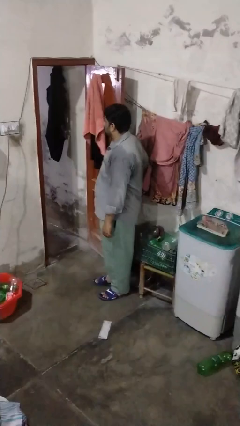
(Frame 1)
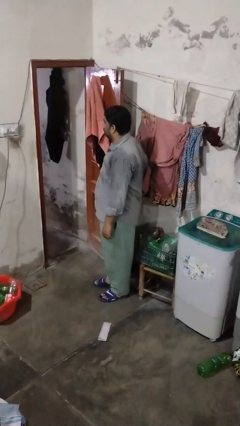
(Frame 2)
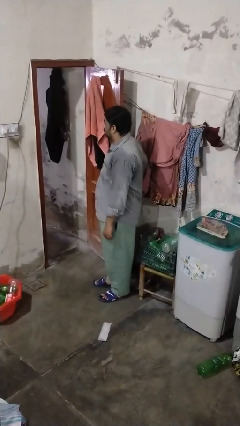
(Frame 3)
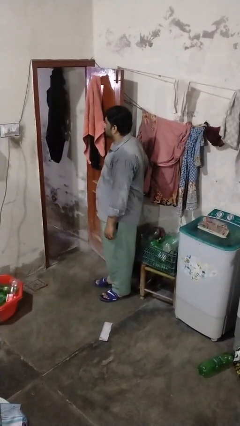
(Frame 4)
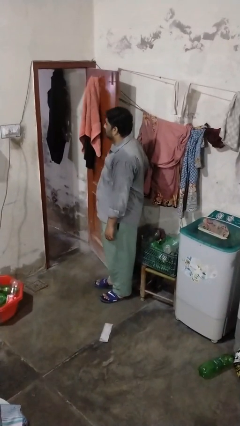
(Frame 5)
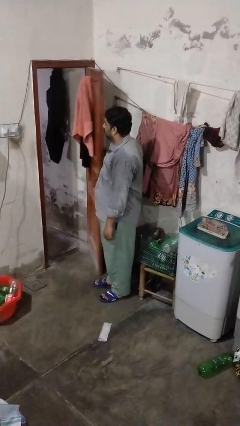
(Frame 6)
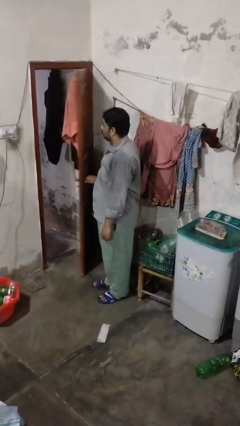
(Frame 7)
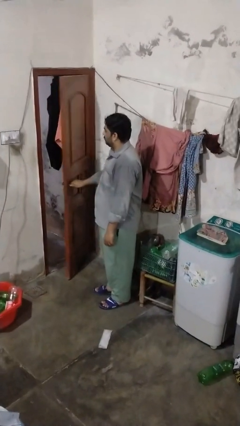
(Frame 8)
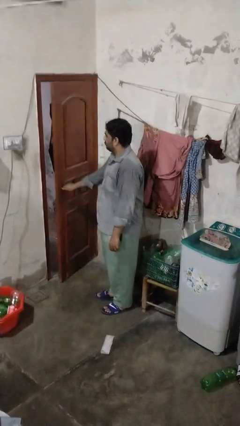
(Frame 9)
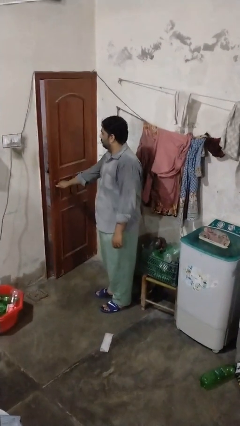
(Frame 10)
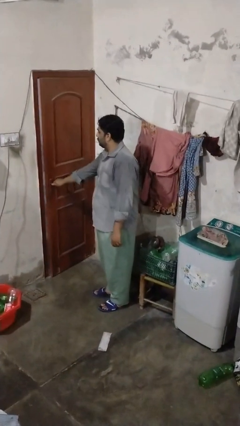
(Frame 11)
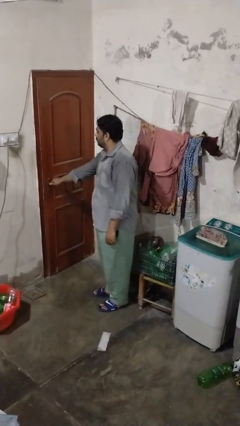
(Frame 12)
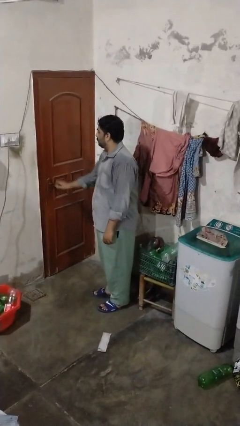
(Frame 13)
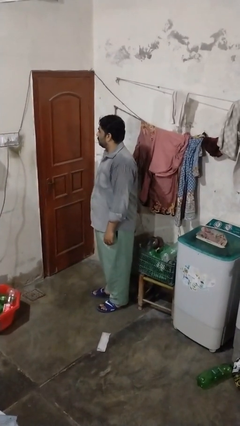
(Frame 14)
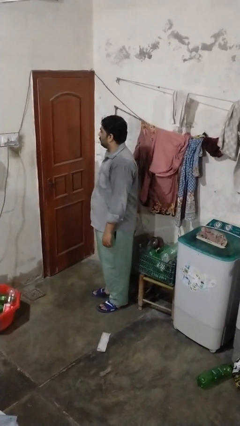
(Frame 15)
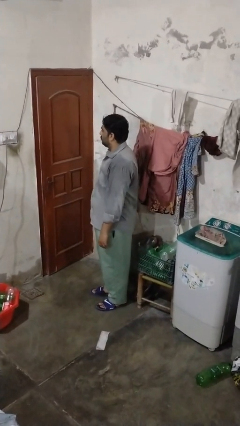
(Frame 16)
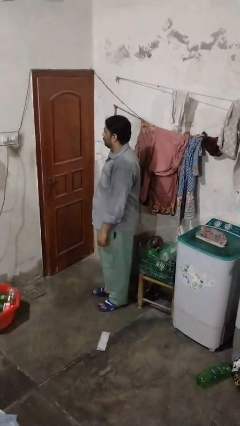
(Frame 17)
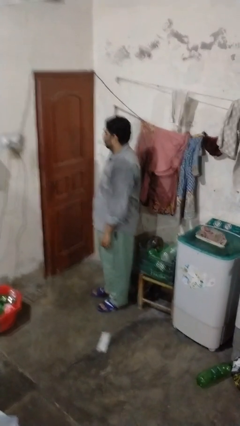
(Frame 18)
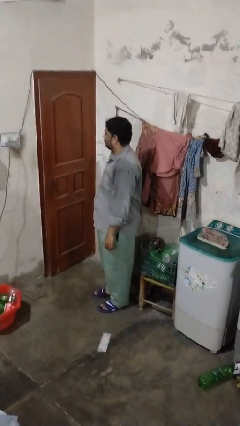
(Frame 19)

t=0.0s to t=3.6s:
person closes closet door

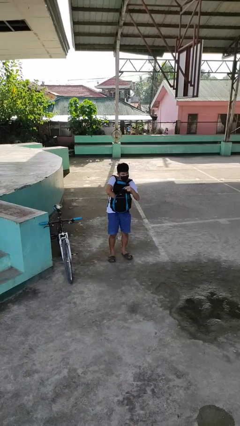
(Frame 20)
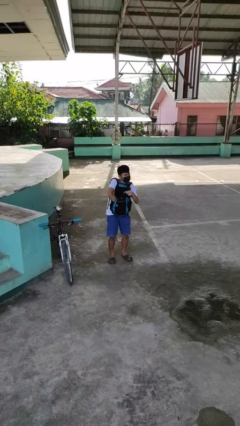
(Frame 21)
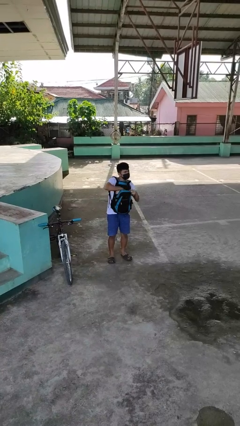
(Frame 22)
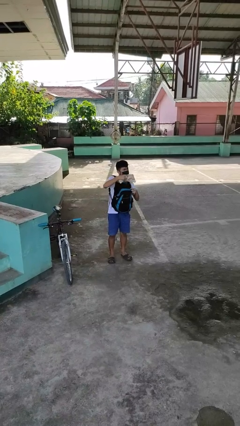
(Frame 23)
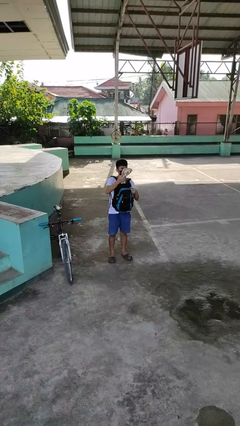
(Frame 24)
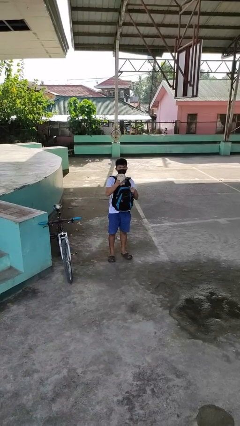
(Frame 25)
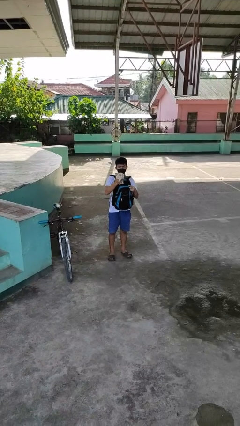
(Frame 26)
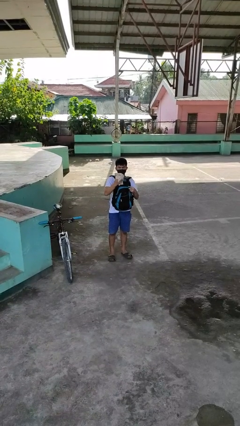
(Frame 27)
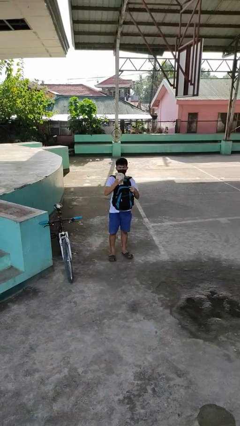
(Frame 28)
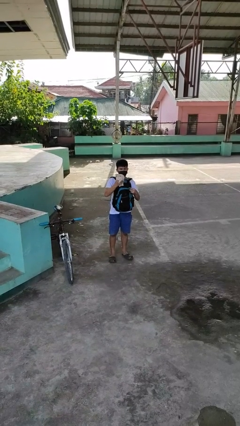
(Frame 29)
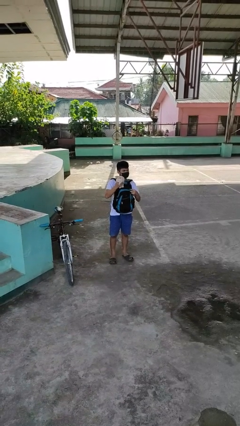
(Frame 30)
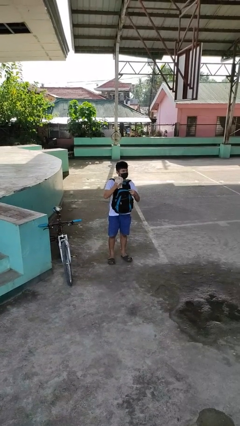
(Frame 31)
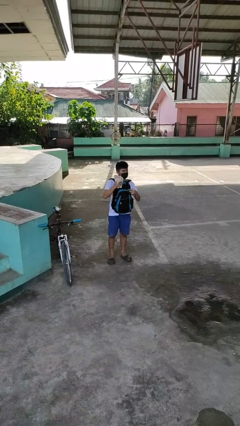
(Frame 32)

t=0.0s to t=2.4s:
person takes object from backpack

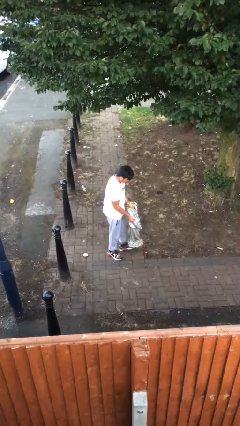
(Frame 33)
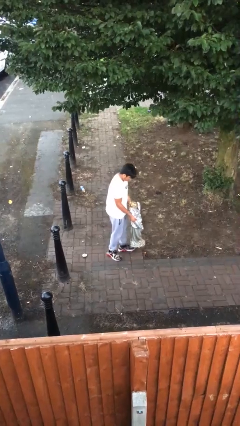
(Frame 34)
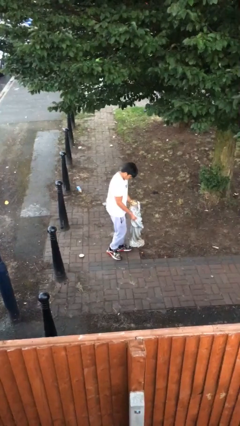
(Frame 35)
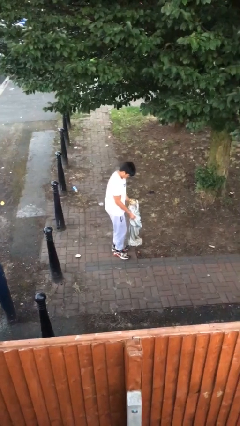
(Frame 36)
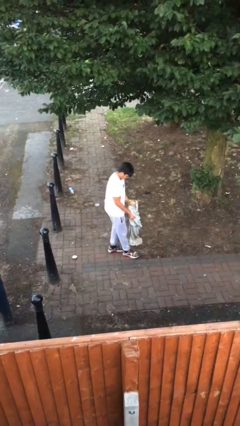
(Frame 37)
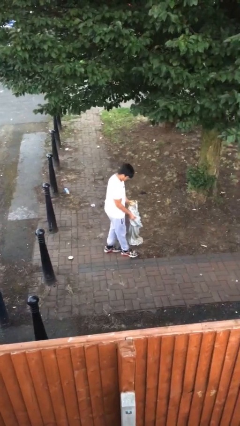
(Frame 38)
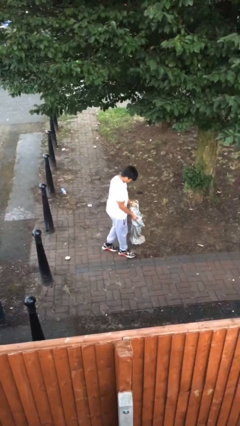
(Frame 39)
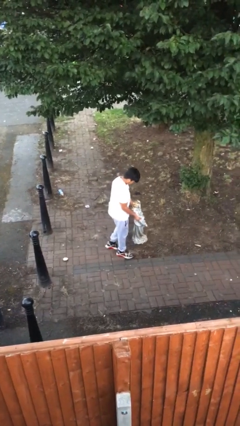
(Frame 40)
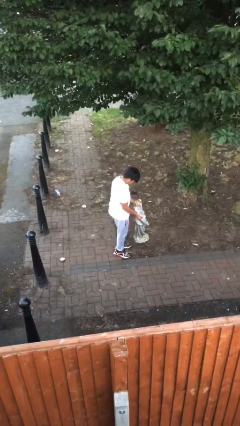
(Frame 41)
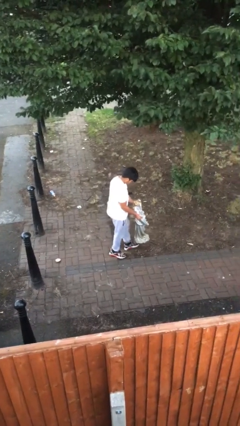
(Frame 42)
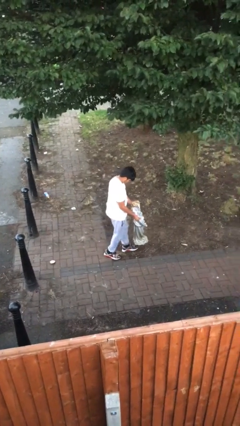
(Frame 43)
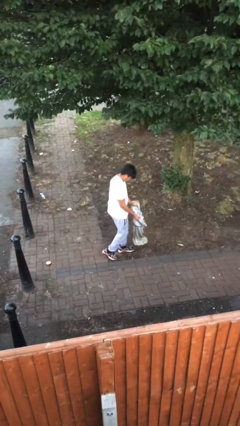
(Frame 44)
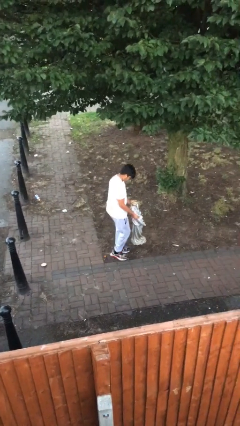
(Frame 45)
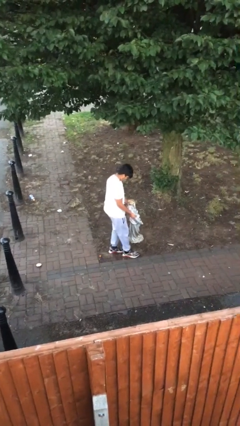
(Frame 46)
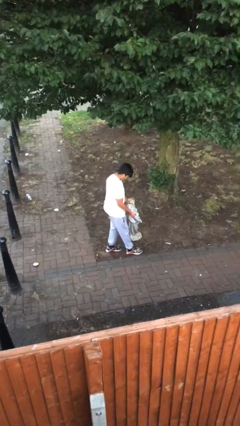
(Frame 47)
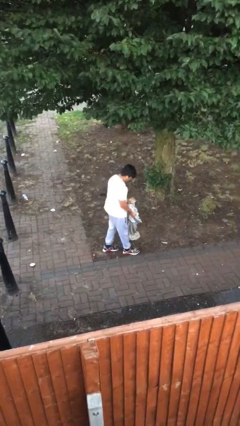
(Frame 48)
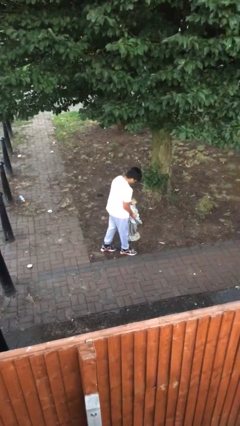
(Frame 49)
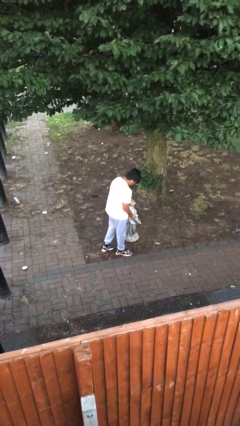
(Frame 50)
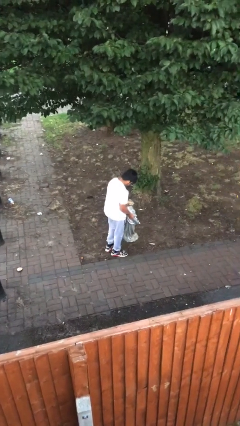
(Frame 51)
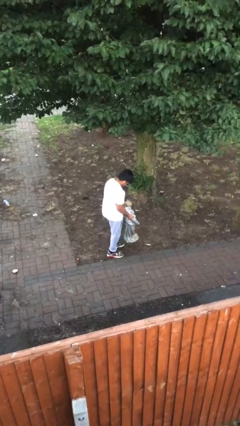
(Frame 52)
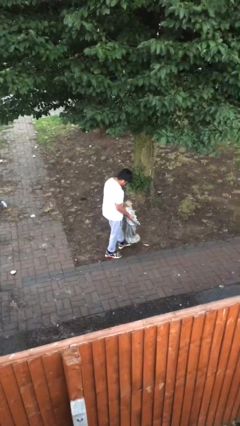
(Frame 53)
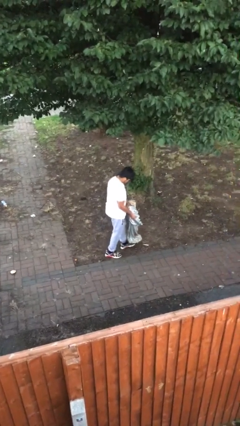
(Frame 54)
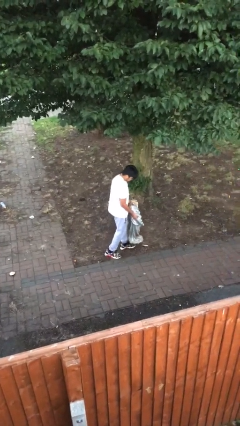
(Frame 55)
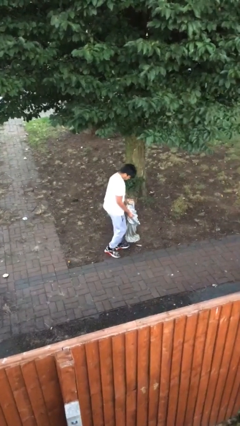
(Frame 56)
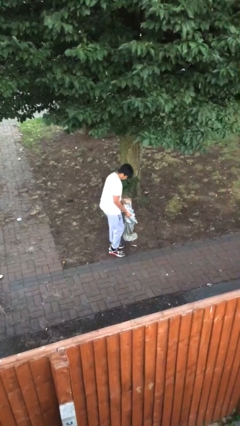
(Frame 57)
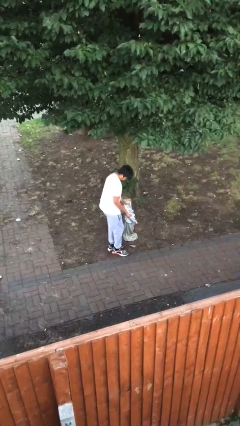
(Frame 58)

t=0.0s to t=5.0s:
person carries heavy object

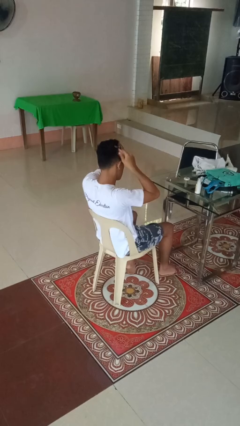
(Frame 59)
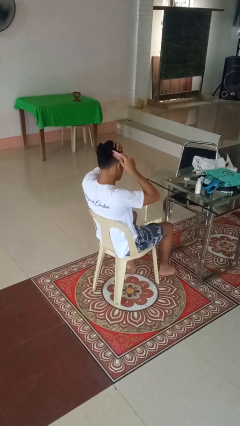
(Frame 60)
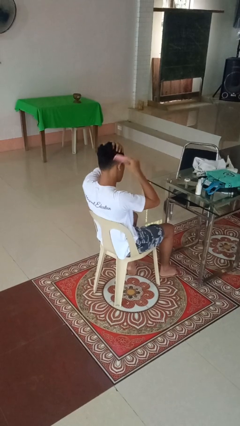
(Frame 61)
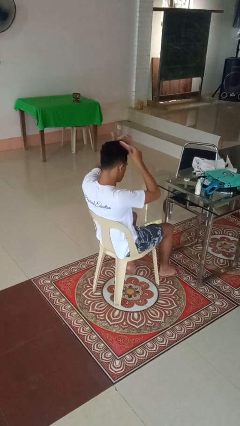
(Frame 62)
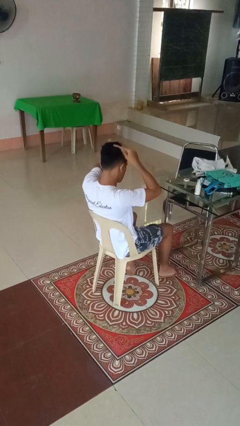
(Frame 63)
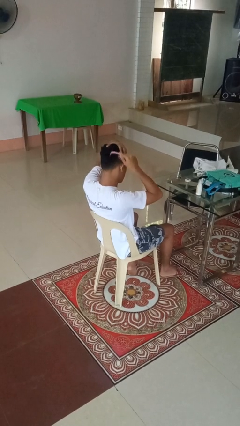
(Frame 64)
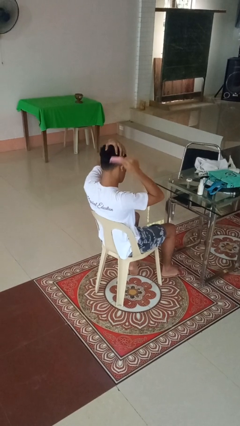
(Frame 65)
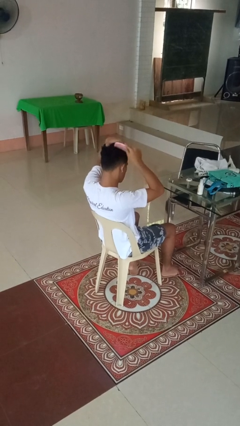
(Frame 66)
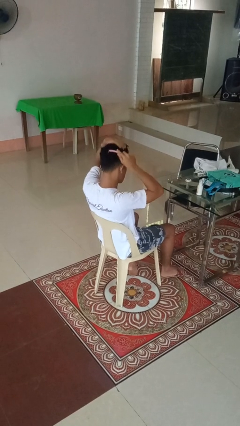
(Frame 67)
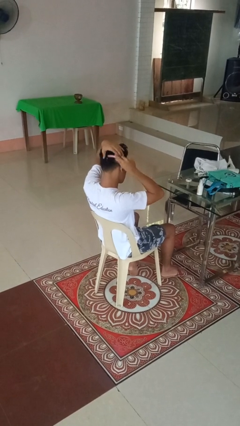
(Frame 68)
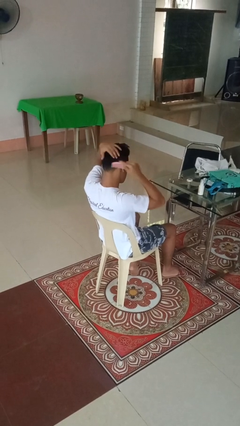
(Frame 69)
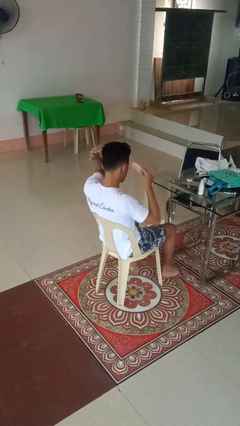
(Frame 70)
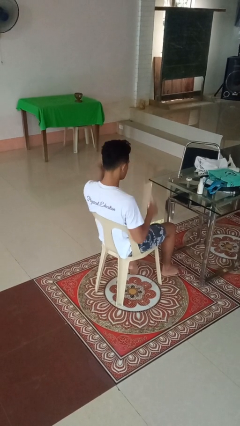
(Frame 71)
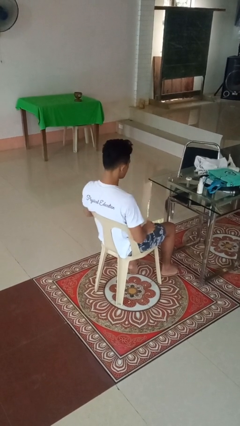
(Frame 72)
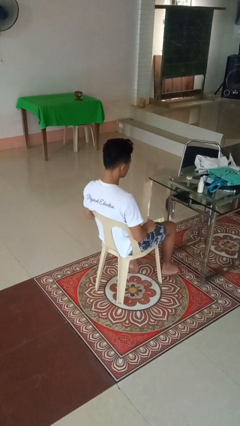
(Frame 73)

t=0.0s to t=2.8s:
person brushes hair

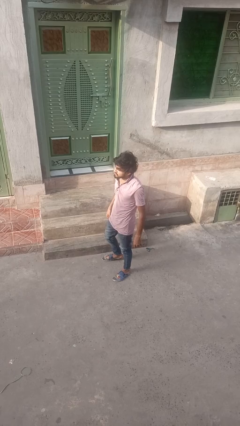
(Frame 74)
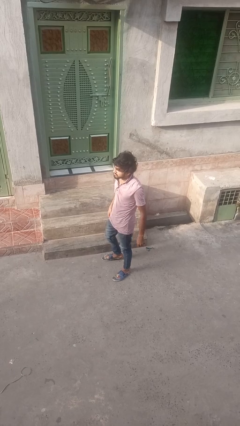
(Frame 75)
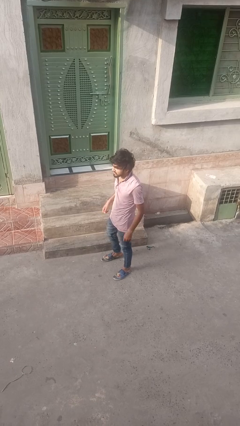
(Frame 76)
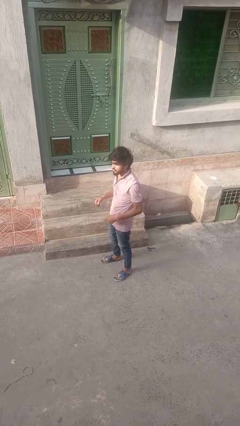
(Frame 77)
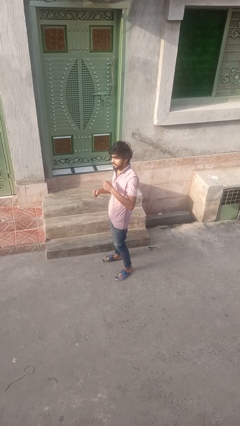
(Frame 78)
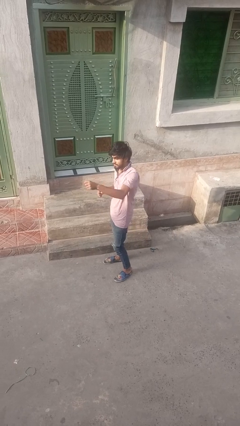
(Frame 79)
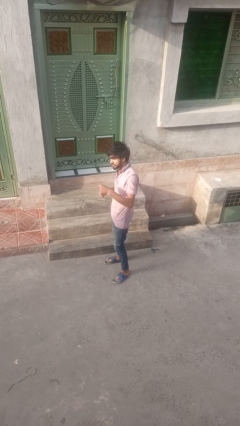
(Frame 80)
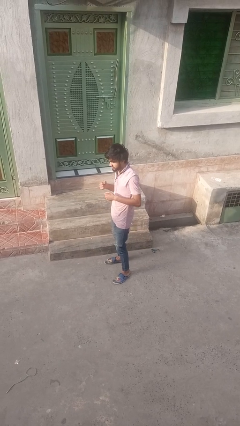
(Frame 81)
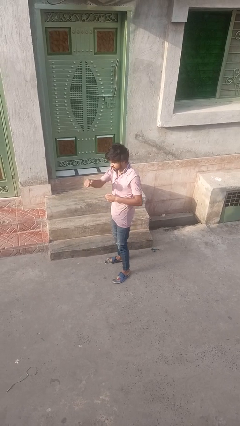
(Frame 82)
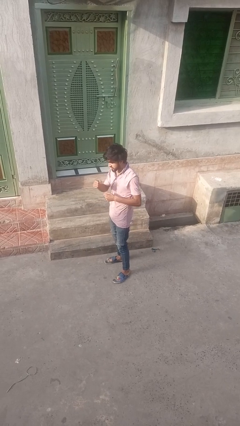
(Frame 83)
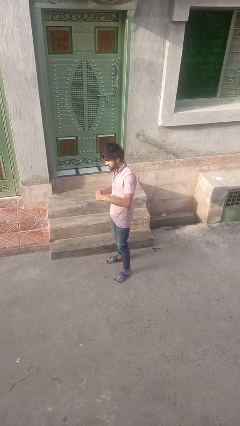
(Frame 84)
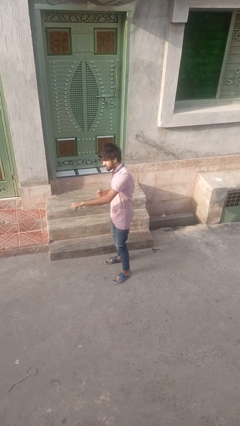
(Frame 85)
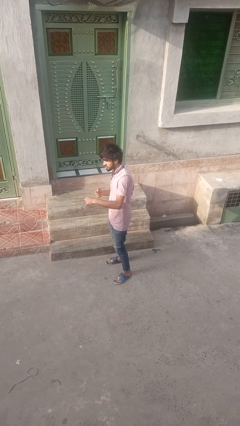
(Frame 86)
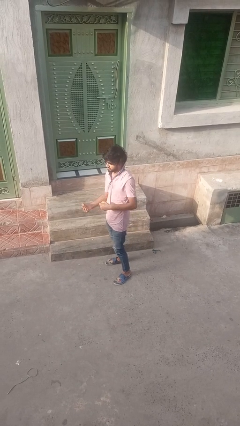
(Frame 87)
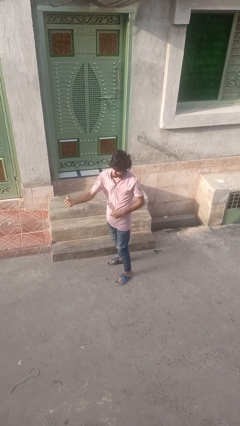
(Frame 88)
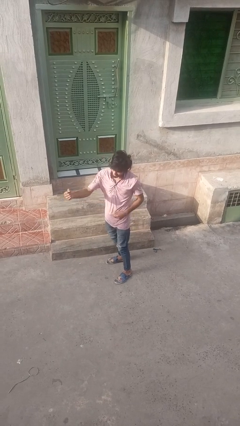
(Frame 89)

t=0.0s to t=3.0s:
person punches

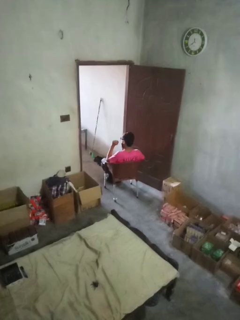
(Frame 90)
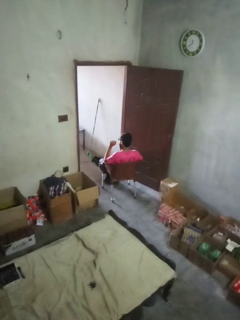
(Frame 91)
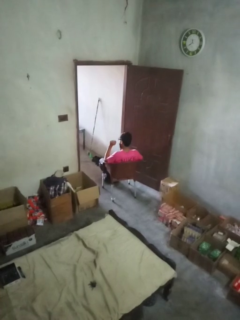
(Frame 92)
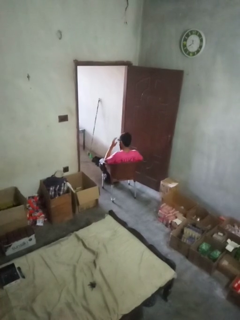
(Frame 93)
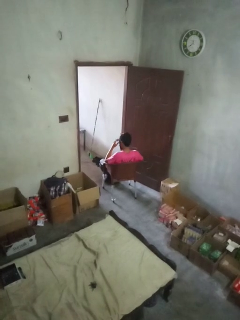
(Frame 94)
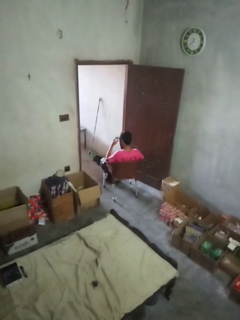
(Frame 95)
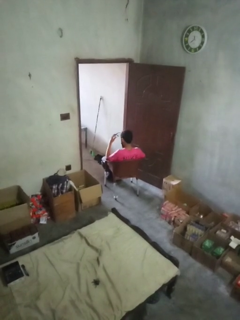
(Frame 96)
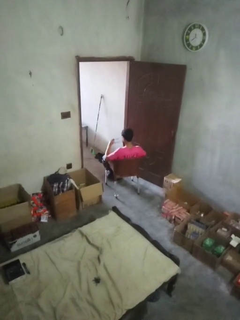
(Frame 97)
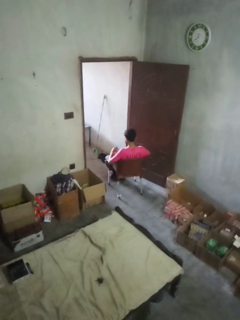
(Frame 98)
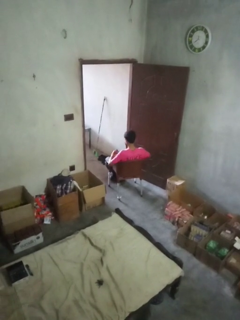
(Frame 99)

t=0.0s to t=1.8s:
person takes off glasses
